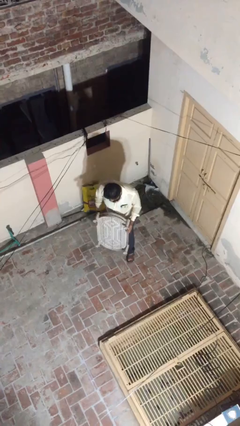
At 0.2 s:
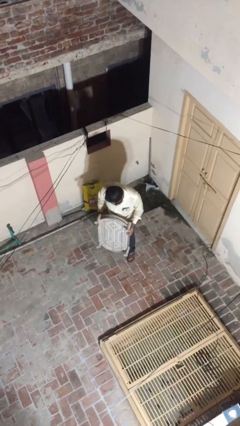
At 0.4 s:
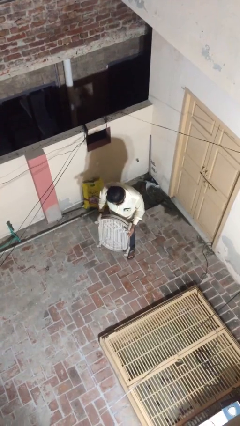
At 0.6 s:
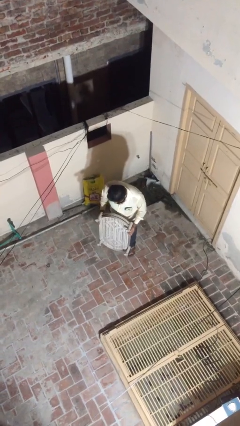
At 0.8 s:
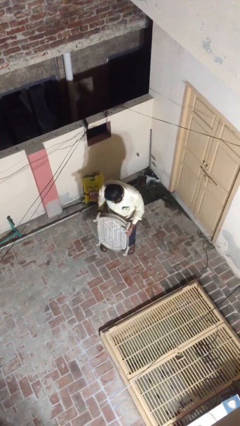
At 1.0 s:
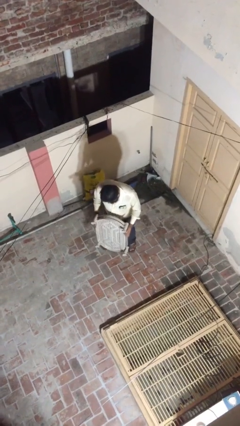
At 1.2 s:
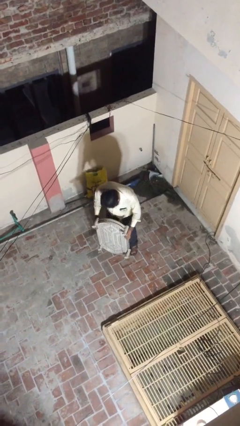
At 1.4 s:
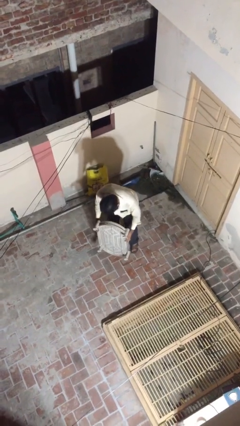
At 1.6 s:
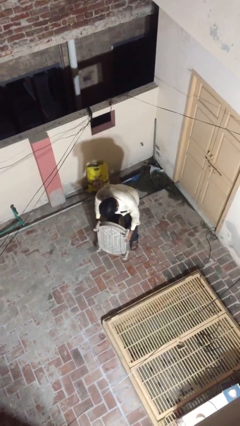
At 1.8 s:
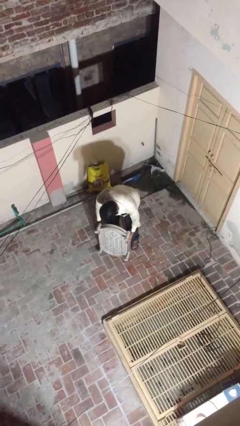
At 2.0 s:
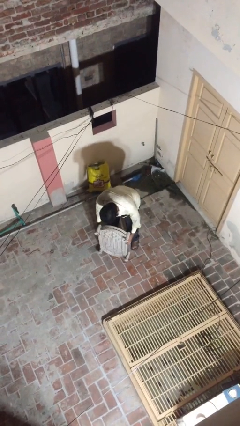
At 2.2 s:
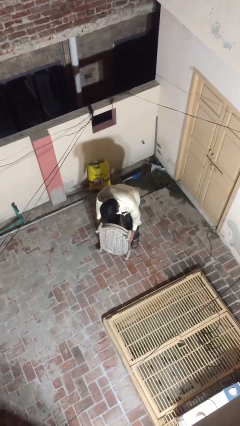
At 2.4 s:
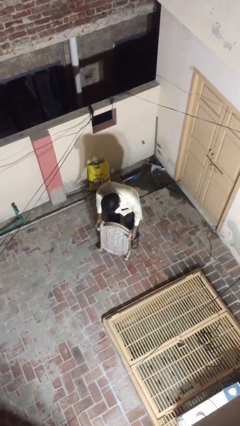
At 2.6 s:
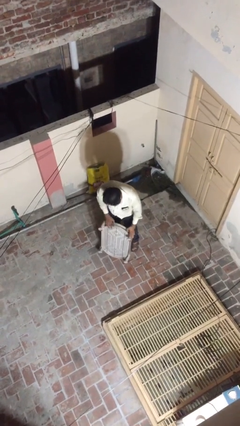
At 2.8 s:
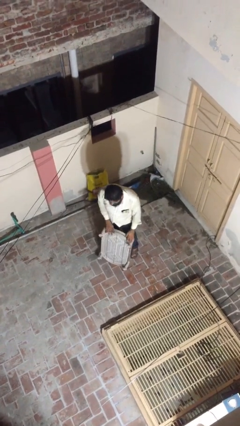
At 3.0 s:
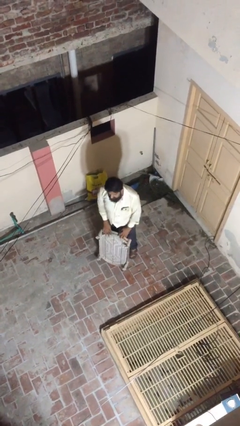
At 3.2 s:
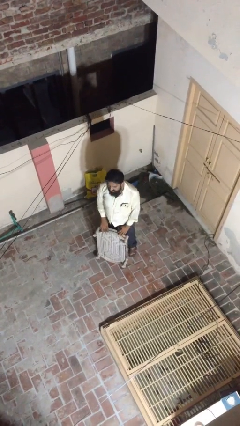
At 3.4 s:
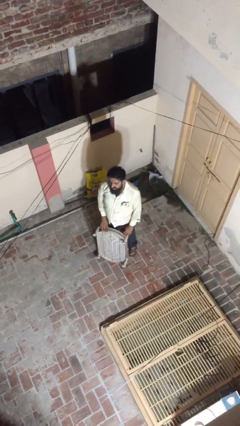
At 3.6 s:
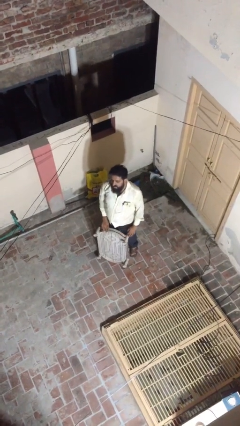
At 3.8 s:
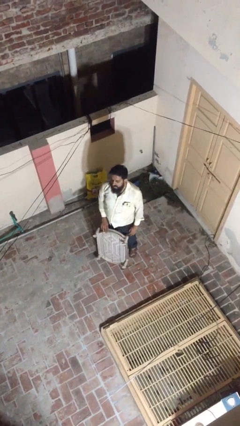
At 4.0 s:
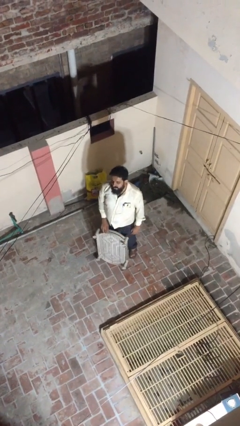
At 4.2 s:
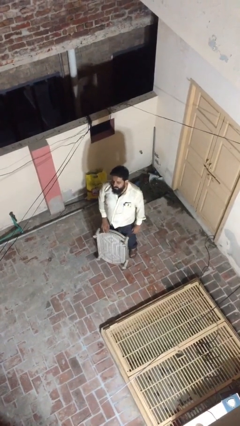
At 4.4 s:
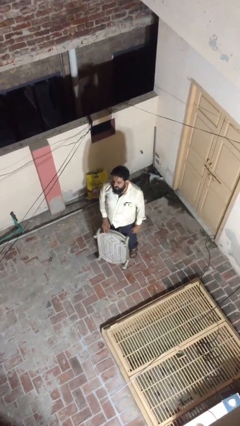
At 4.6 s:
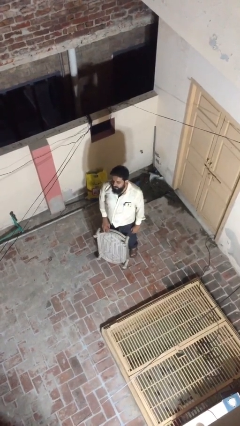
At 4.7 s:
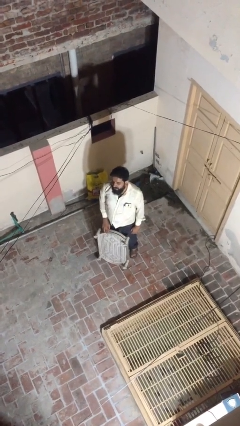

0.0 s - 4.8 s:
person puts down object on floor

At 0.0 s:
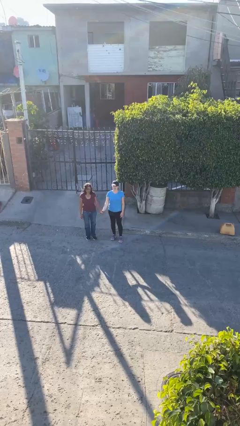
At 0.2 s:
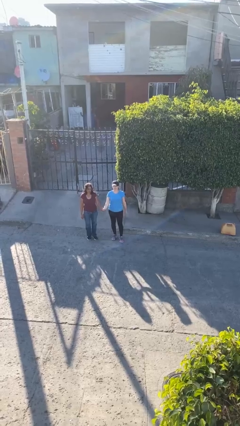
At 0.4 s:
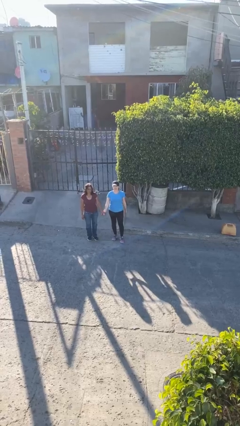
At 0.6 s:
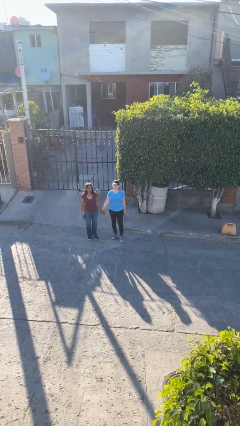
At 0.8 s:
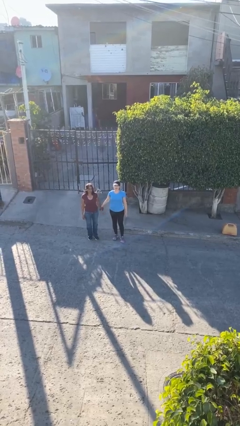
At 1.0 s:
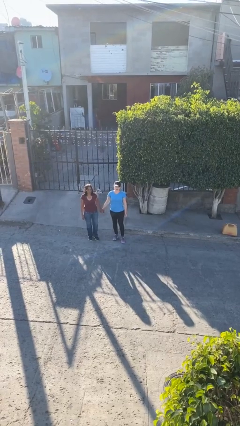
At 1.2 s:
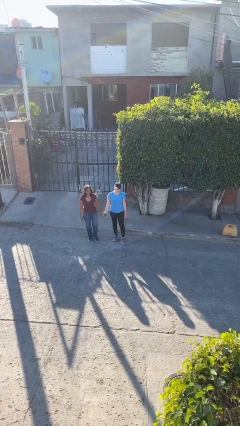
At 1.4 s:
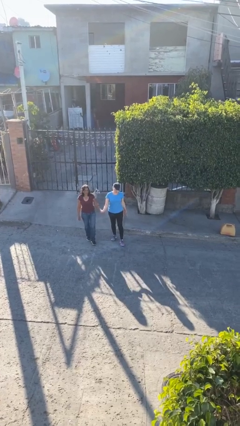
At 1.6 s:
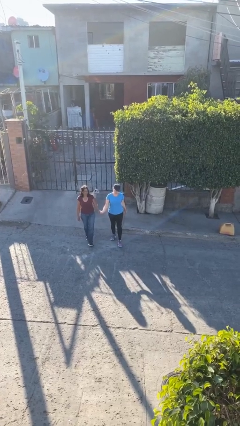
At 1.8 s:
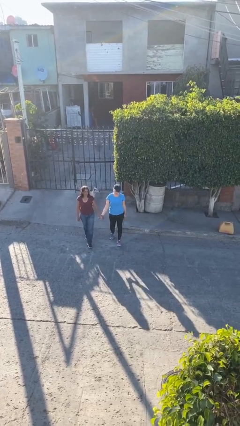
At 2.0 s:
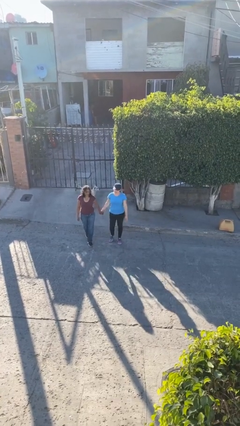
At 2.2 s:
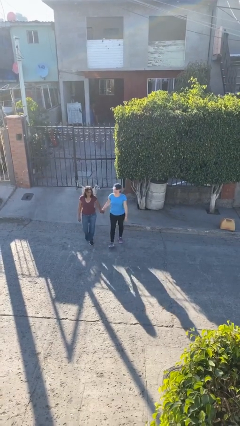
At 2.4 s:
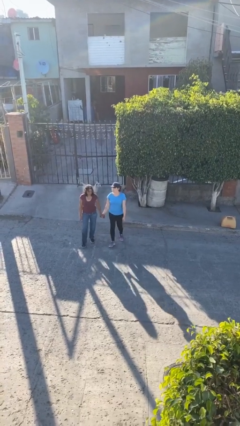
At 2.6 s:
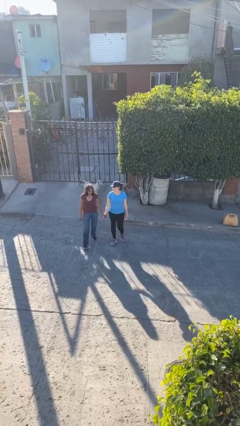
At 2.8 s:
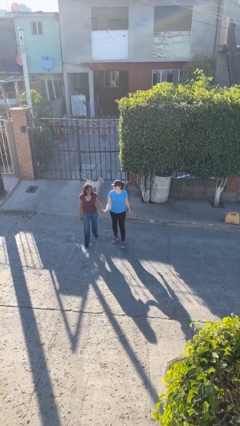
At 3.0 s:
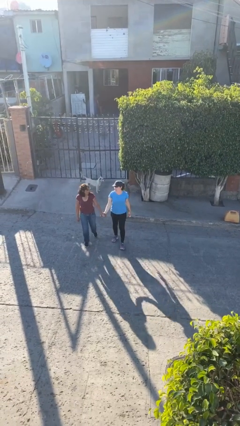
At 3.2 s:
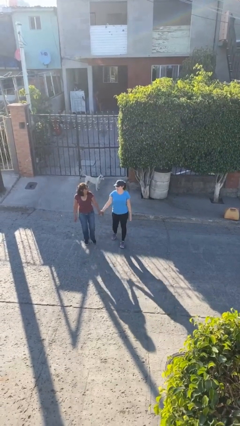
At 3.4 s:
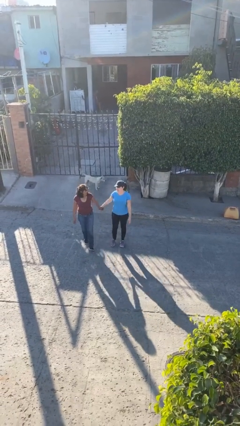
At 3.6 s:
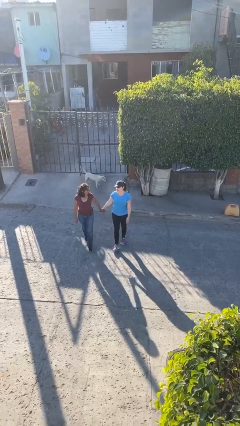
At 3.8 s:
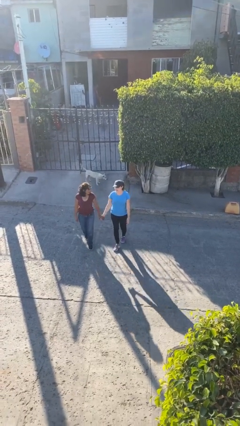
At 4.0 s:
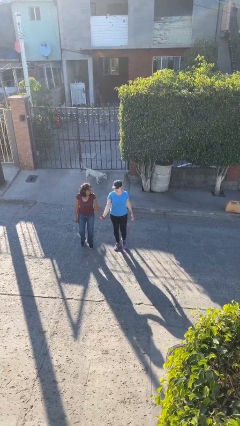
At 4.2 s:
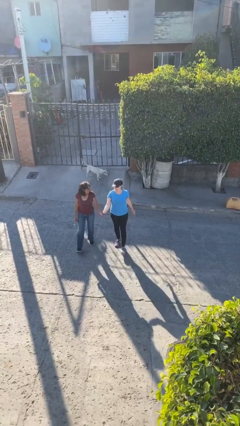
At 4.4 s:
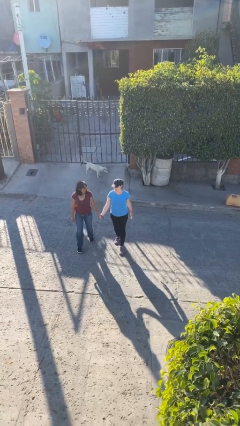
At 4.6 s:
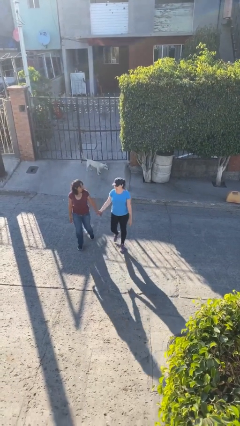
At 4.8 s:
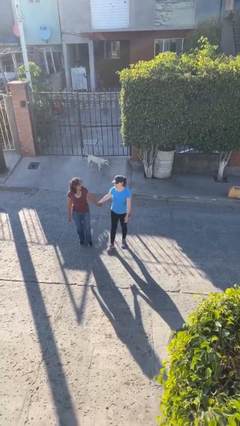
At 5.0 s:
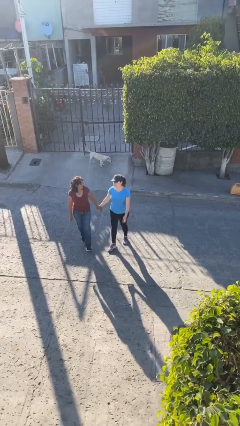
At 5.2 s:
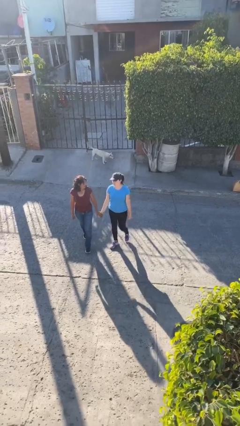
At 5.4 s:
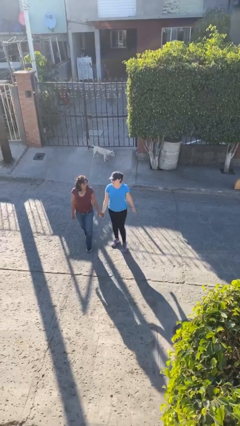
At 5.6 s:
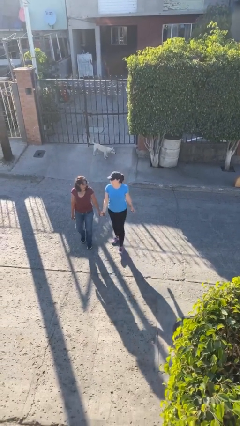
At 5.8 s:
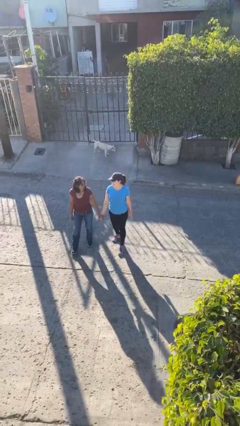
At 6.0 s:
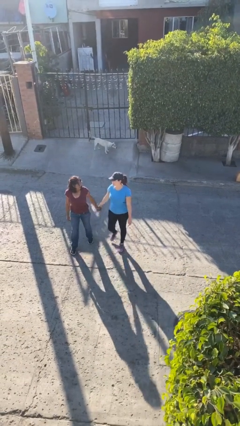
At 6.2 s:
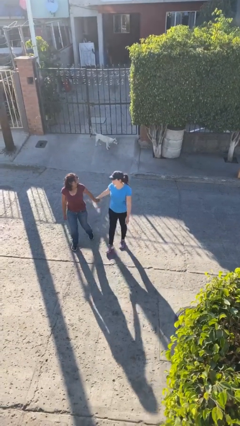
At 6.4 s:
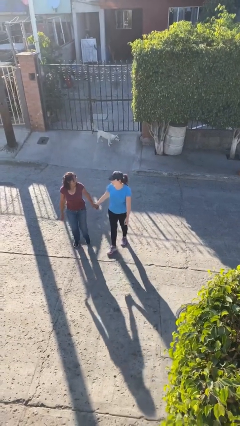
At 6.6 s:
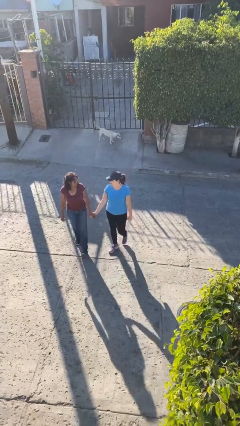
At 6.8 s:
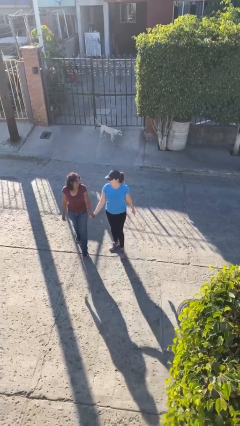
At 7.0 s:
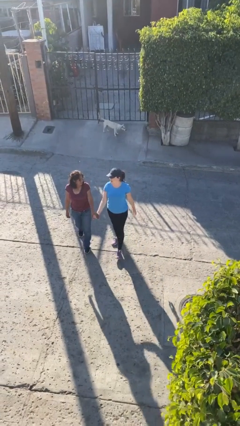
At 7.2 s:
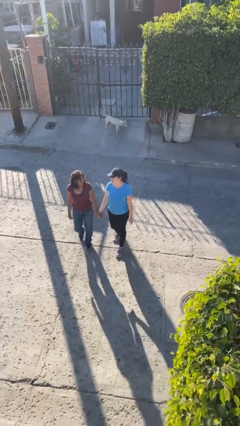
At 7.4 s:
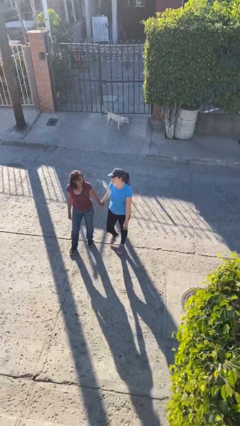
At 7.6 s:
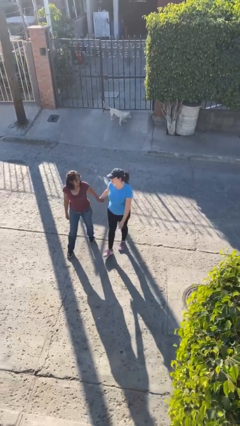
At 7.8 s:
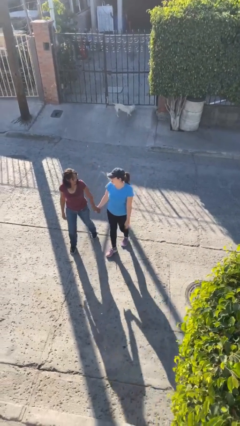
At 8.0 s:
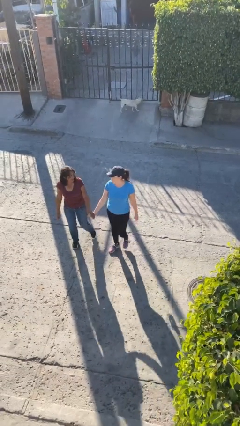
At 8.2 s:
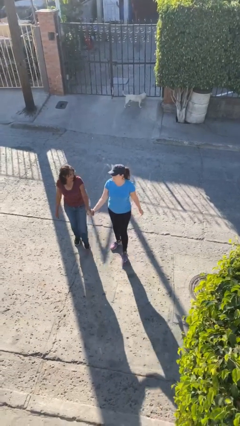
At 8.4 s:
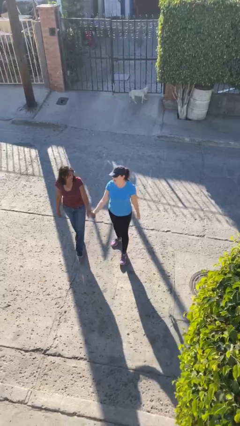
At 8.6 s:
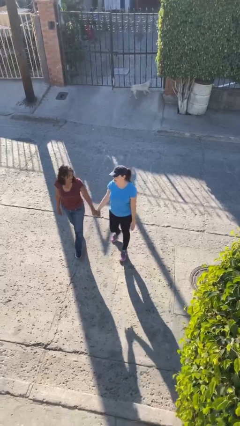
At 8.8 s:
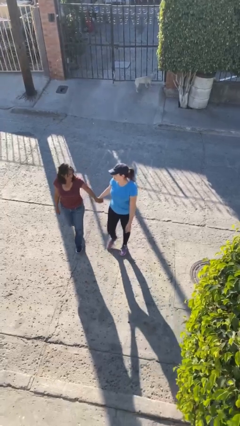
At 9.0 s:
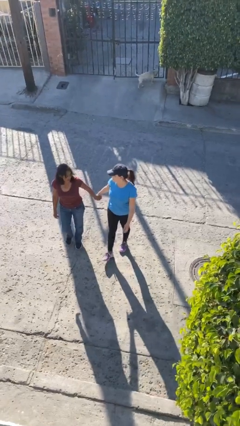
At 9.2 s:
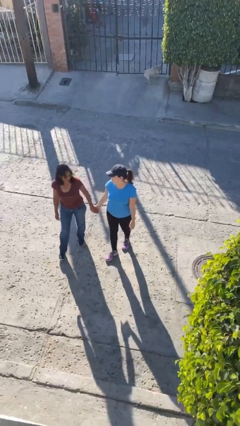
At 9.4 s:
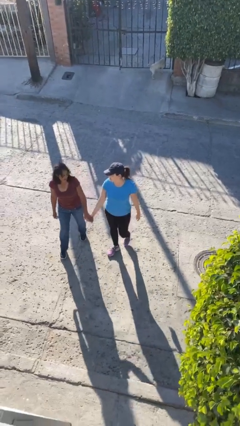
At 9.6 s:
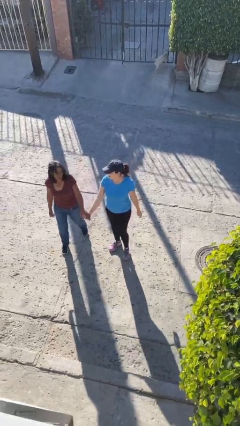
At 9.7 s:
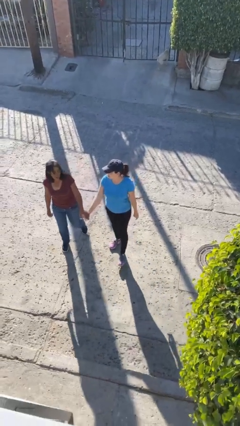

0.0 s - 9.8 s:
person holds hand

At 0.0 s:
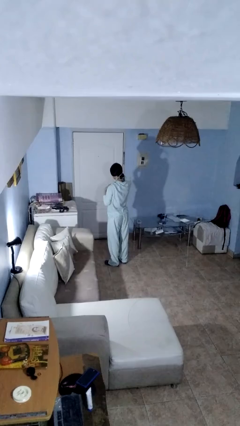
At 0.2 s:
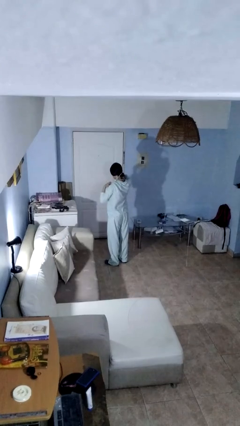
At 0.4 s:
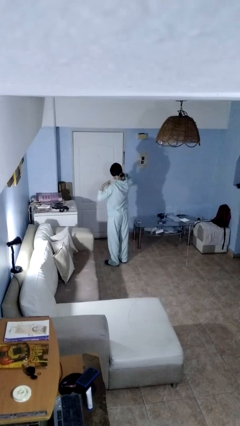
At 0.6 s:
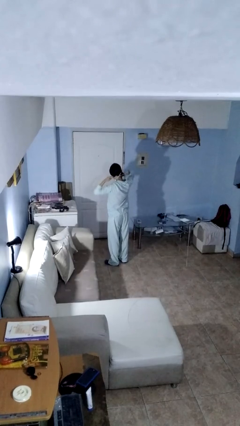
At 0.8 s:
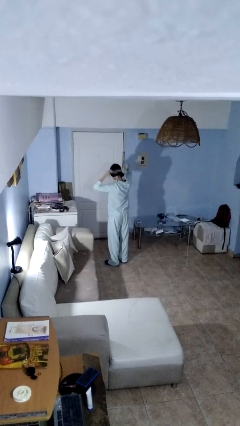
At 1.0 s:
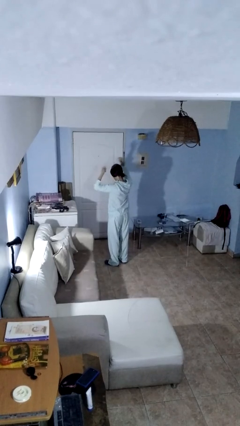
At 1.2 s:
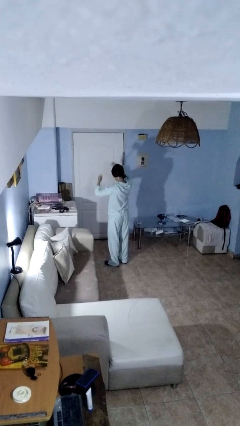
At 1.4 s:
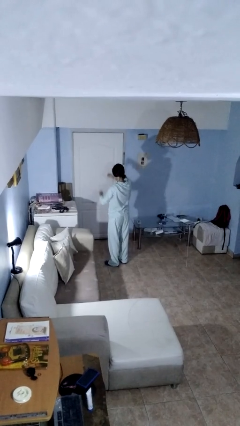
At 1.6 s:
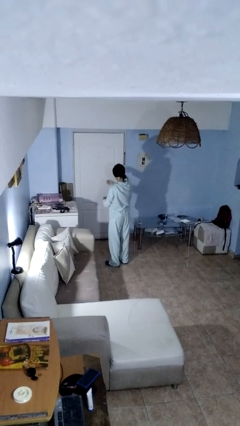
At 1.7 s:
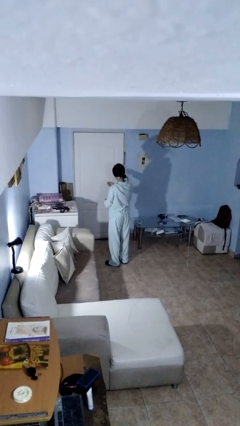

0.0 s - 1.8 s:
person takes off necklace

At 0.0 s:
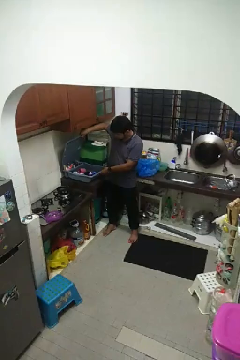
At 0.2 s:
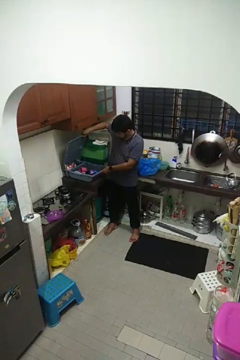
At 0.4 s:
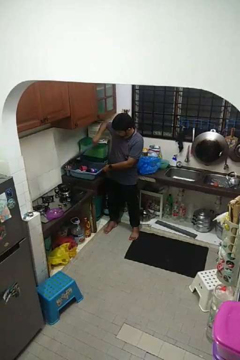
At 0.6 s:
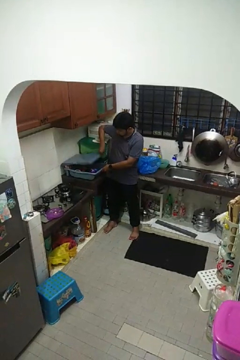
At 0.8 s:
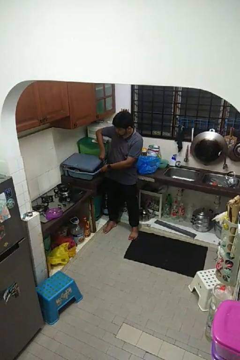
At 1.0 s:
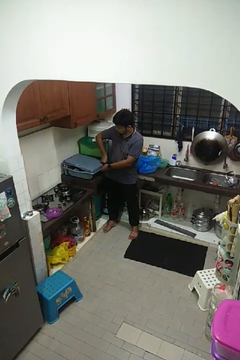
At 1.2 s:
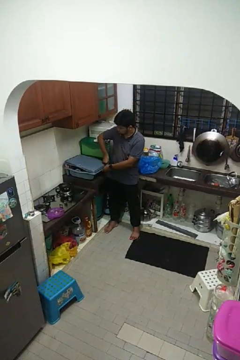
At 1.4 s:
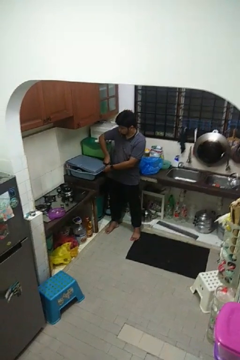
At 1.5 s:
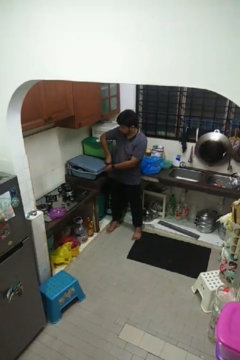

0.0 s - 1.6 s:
person closes dishwasher

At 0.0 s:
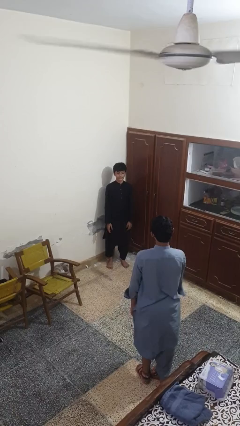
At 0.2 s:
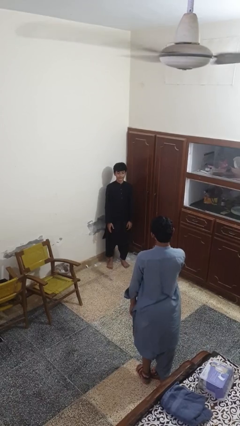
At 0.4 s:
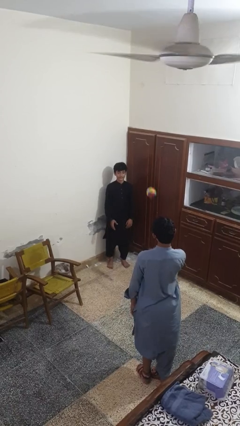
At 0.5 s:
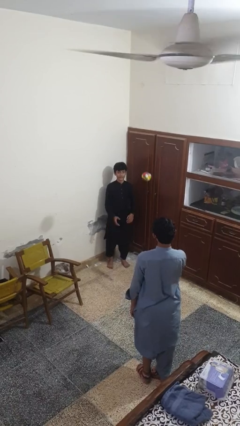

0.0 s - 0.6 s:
person catches object from person
